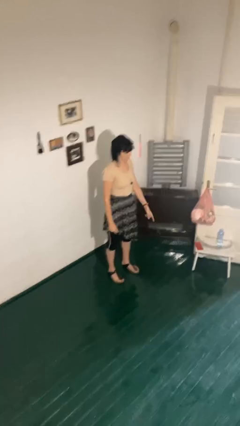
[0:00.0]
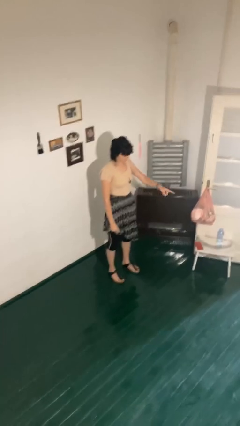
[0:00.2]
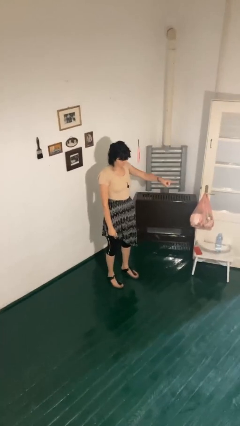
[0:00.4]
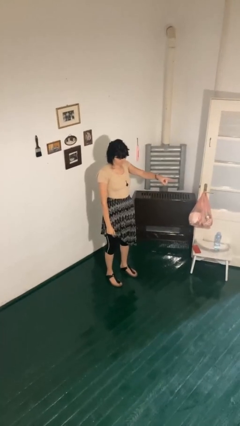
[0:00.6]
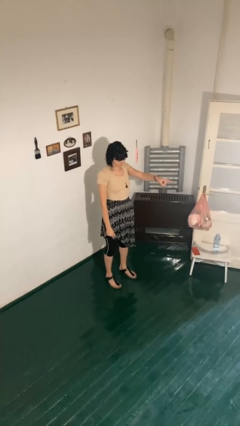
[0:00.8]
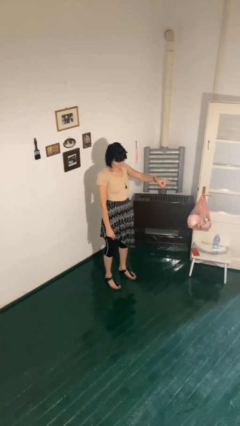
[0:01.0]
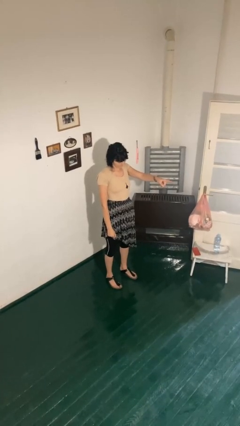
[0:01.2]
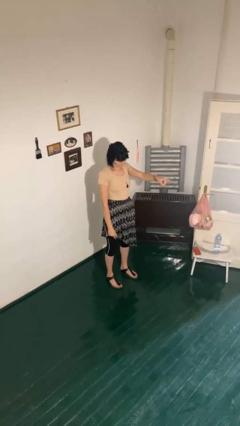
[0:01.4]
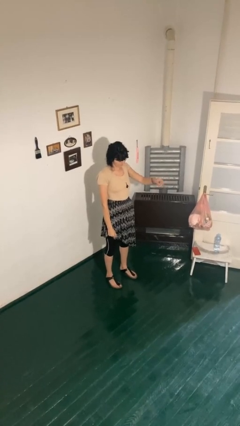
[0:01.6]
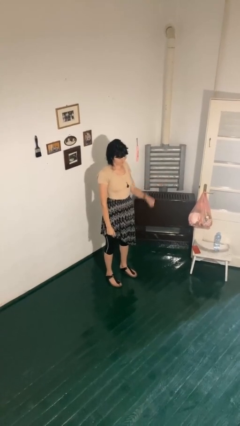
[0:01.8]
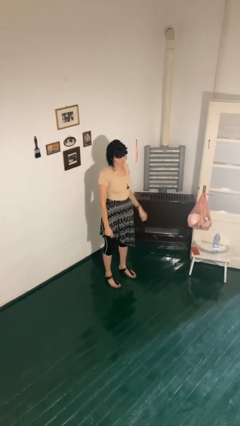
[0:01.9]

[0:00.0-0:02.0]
person points at person

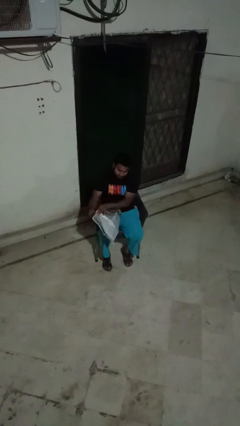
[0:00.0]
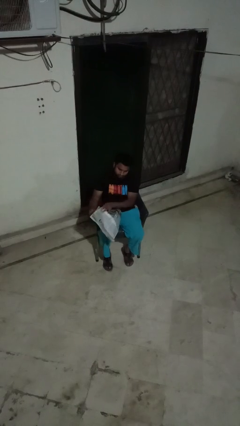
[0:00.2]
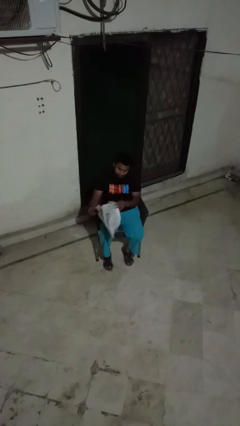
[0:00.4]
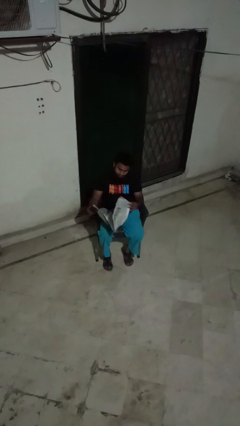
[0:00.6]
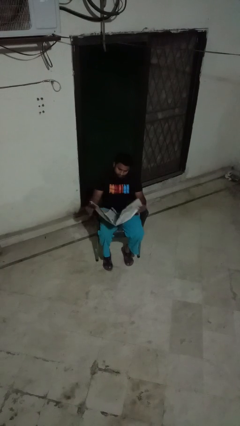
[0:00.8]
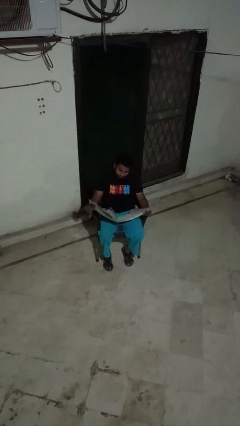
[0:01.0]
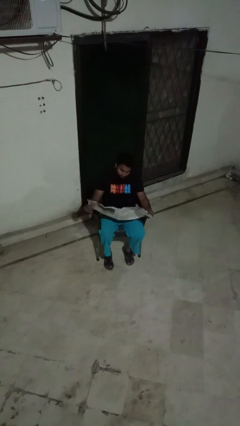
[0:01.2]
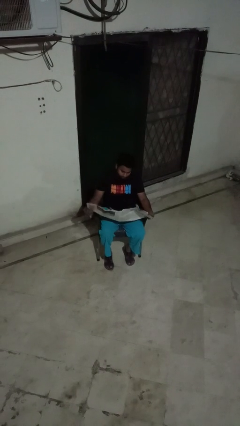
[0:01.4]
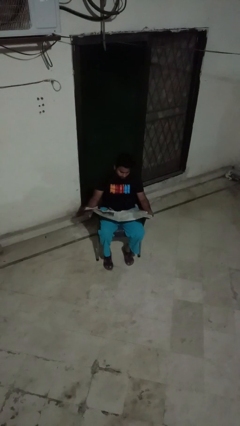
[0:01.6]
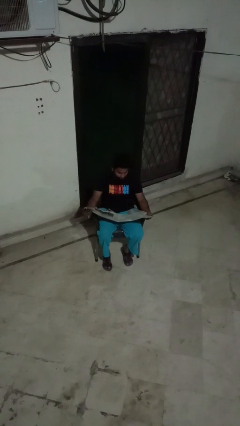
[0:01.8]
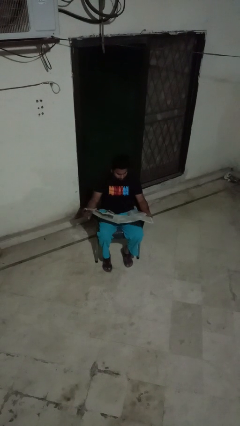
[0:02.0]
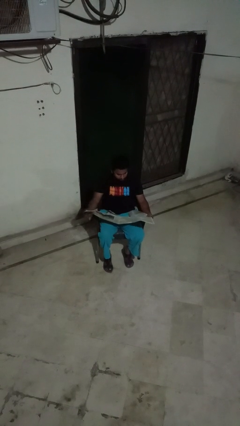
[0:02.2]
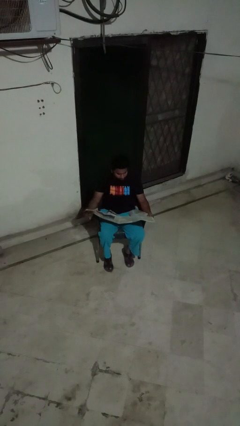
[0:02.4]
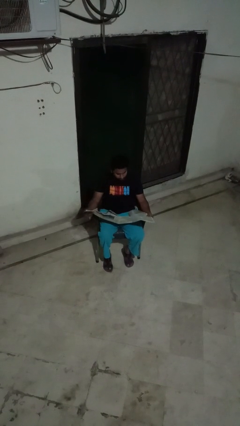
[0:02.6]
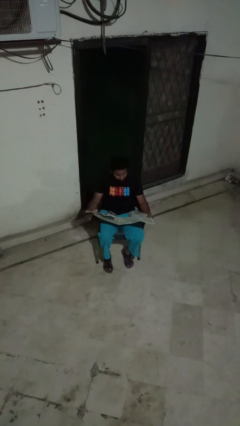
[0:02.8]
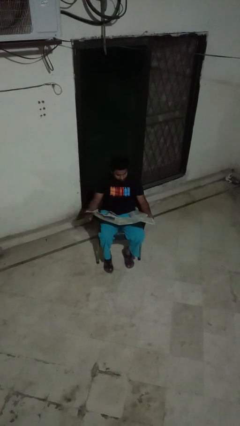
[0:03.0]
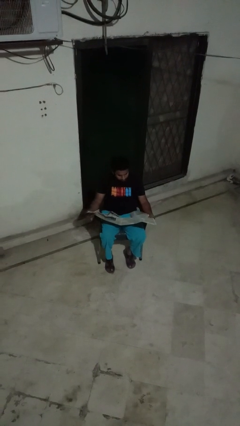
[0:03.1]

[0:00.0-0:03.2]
person reads newspaper

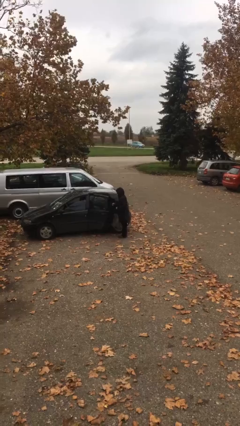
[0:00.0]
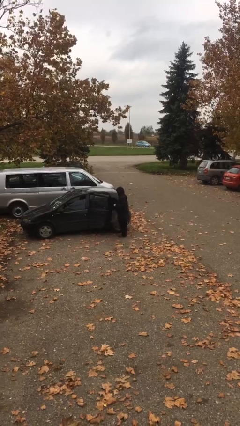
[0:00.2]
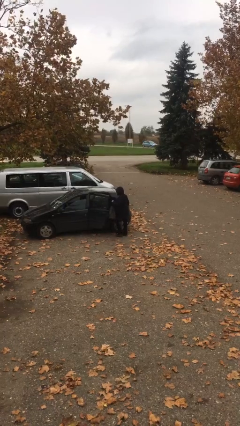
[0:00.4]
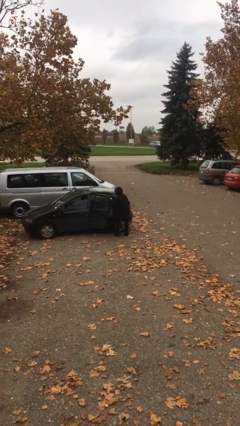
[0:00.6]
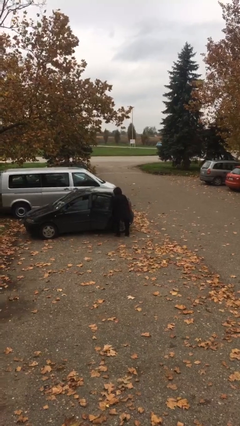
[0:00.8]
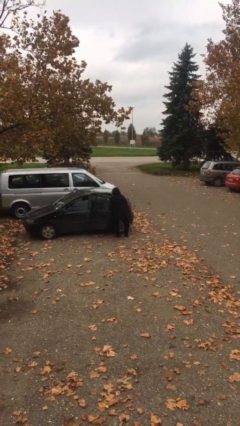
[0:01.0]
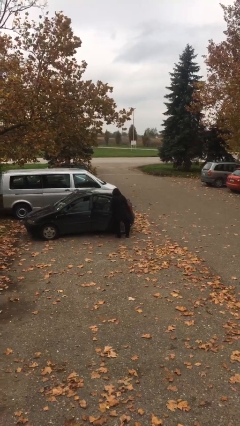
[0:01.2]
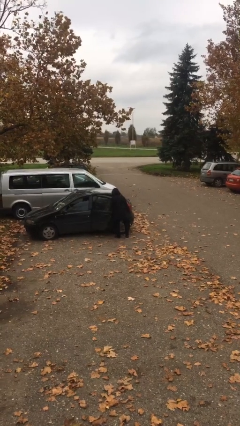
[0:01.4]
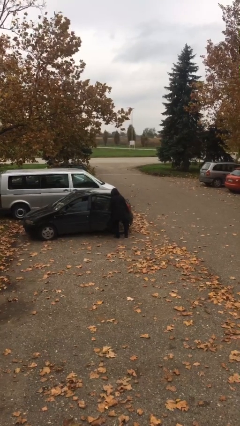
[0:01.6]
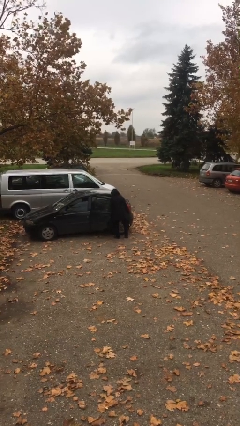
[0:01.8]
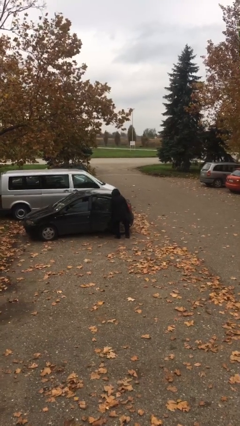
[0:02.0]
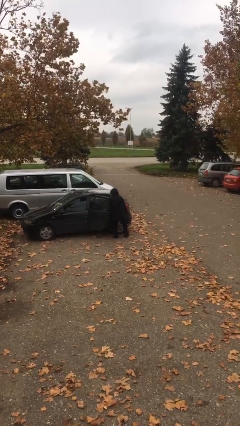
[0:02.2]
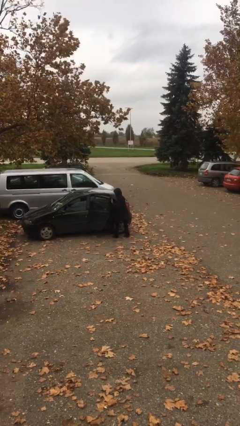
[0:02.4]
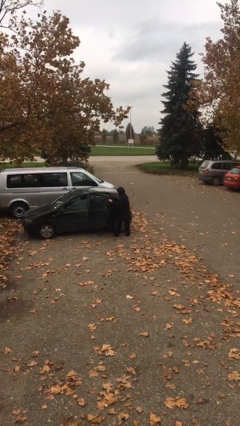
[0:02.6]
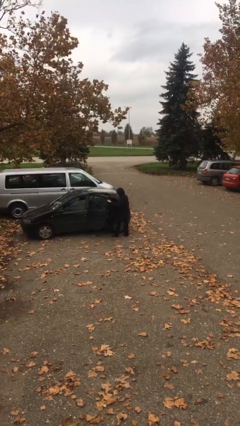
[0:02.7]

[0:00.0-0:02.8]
person loads car

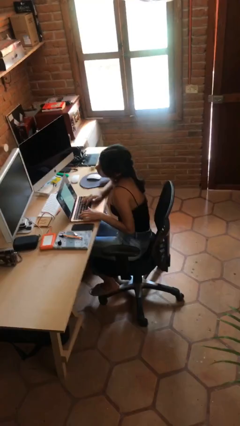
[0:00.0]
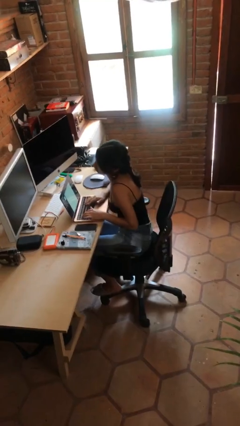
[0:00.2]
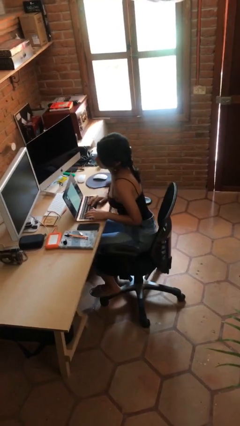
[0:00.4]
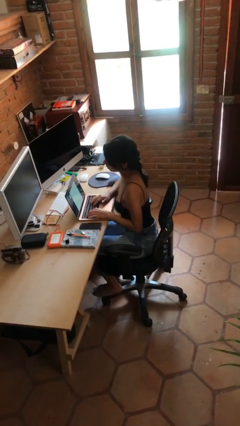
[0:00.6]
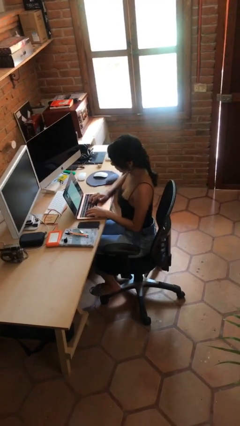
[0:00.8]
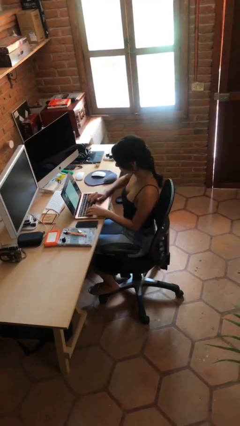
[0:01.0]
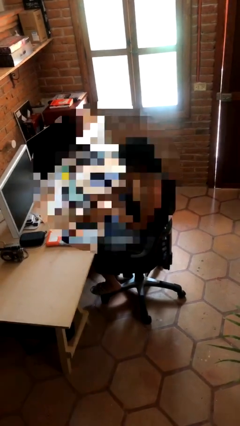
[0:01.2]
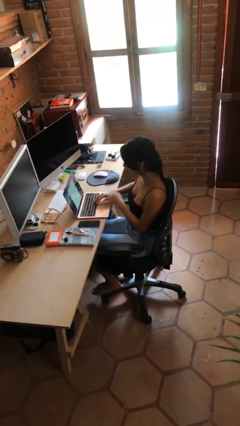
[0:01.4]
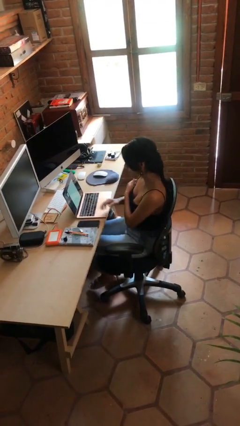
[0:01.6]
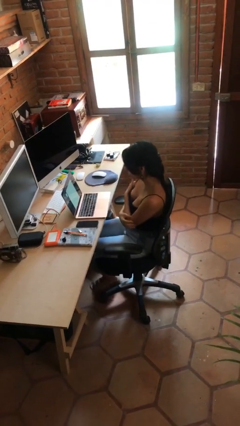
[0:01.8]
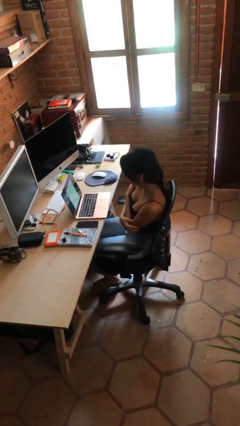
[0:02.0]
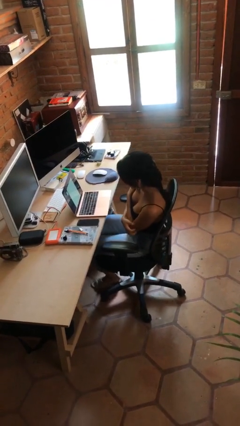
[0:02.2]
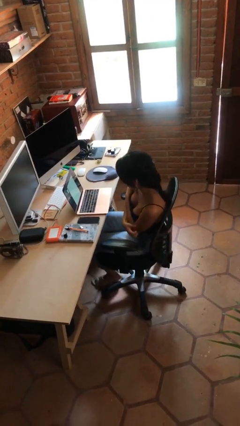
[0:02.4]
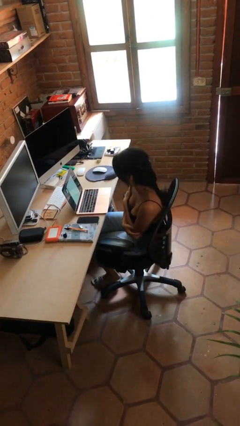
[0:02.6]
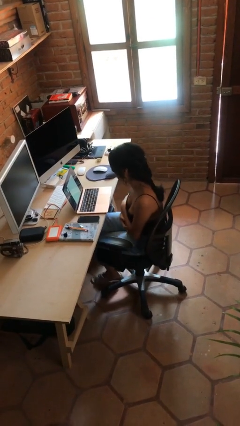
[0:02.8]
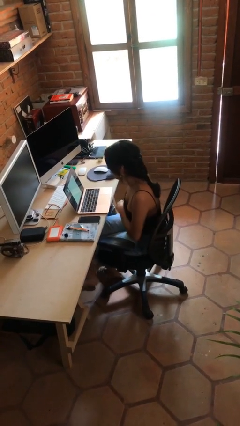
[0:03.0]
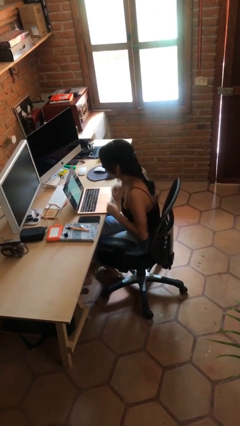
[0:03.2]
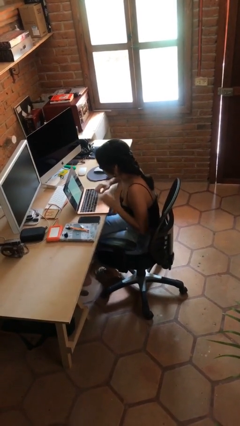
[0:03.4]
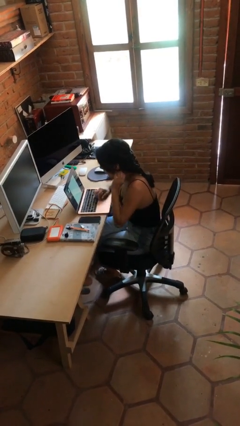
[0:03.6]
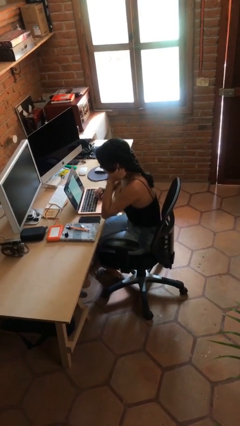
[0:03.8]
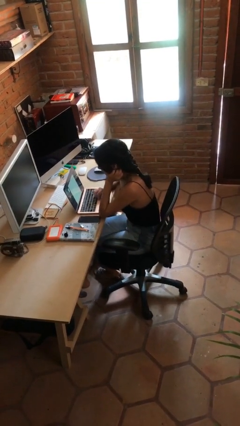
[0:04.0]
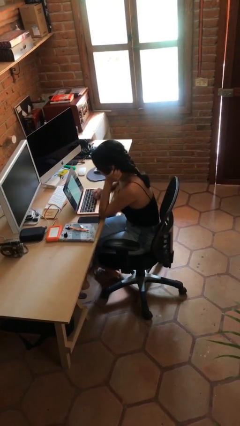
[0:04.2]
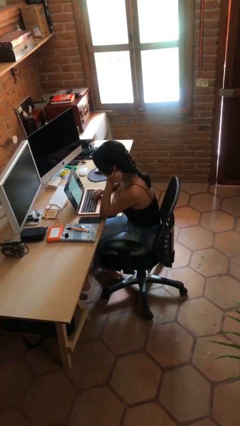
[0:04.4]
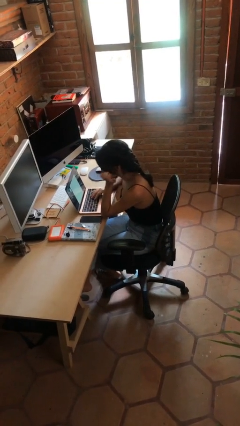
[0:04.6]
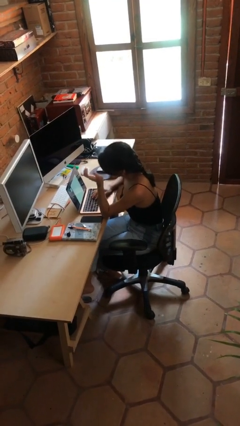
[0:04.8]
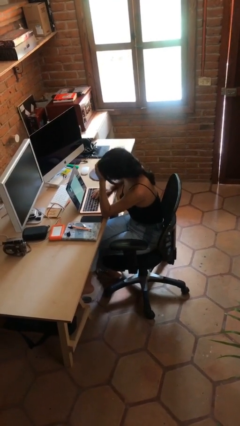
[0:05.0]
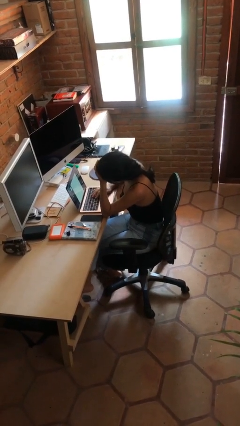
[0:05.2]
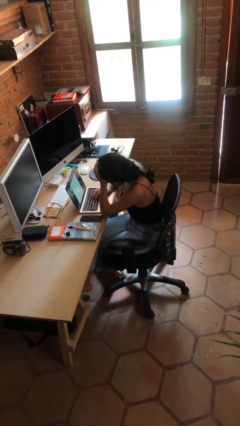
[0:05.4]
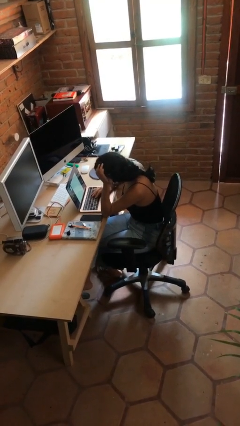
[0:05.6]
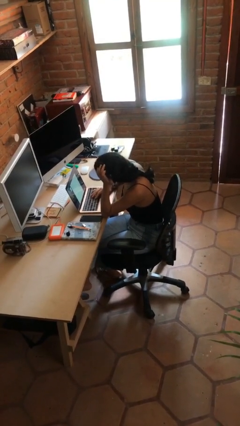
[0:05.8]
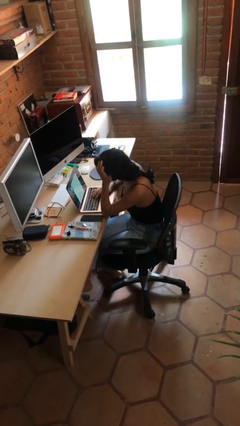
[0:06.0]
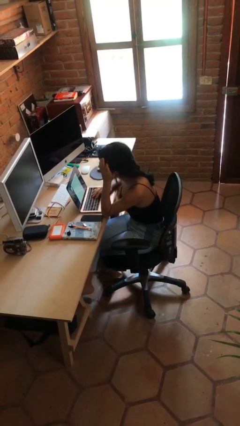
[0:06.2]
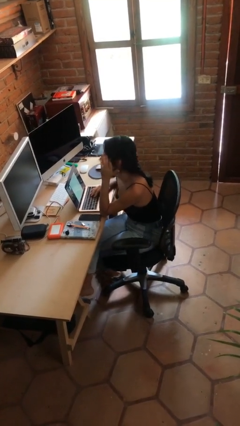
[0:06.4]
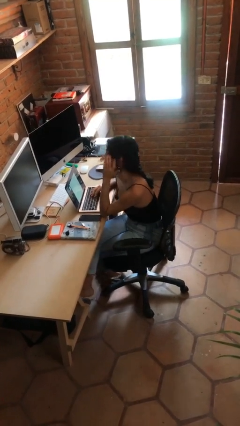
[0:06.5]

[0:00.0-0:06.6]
person interacts with laptop

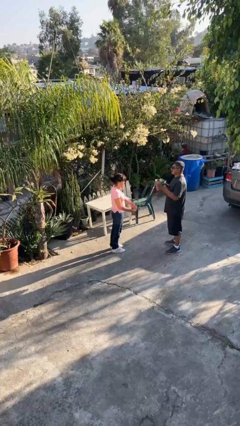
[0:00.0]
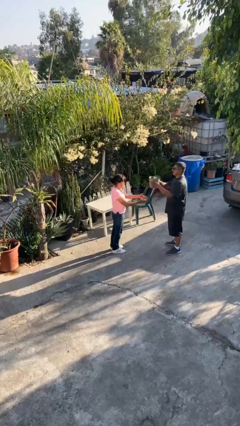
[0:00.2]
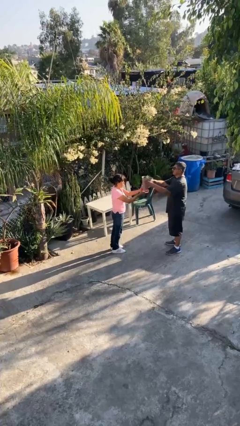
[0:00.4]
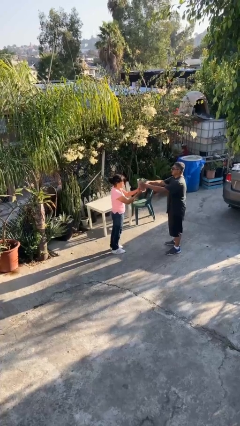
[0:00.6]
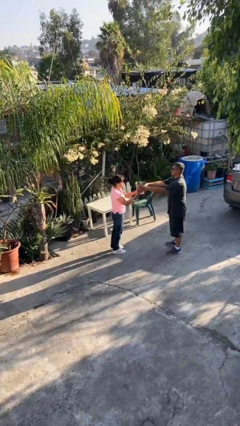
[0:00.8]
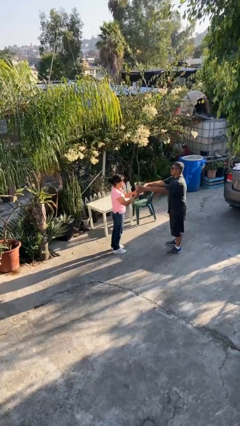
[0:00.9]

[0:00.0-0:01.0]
person transfers object to person

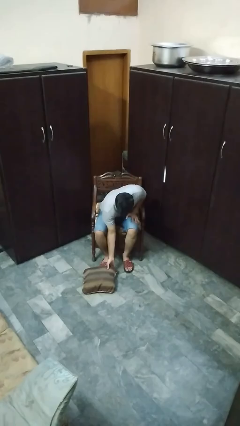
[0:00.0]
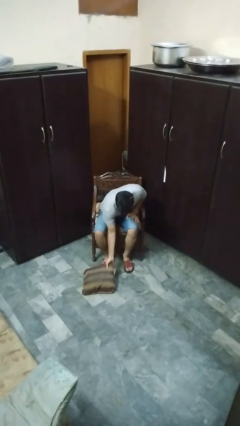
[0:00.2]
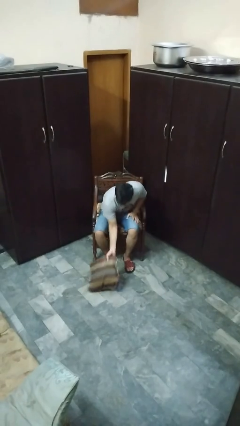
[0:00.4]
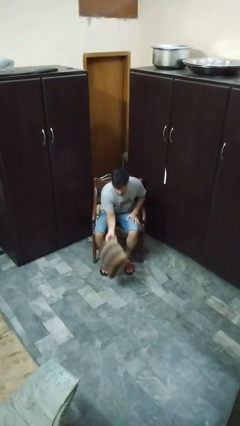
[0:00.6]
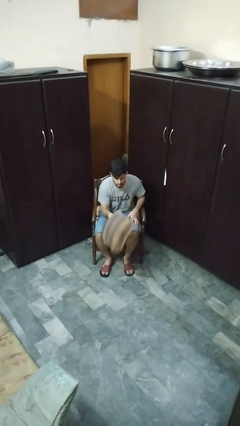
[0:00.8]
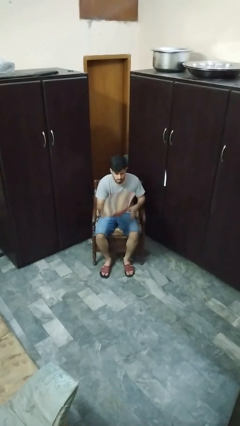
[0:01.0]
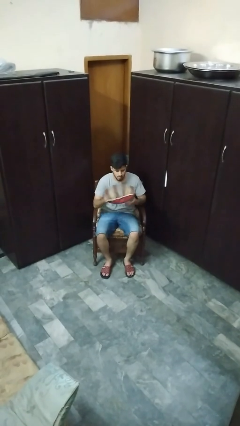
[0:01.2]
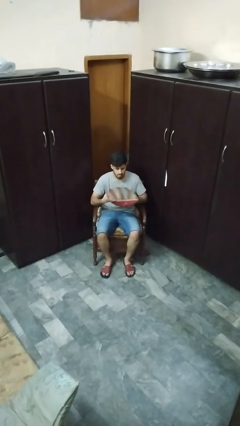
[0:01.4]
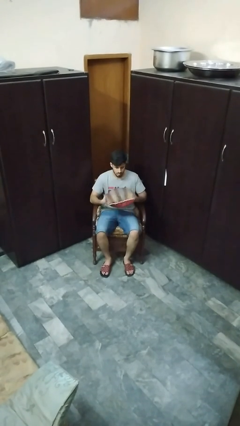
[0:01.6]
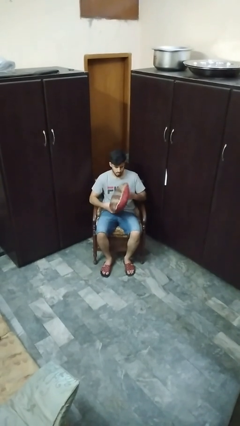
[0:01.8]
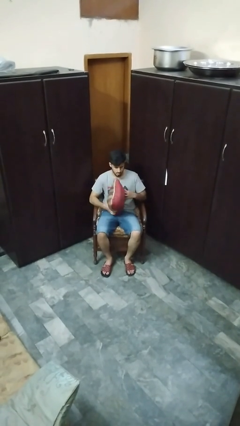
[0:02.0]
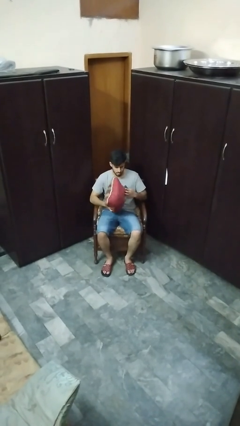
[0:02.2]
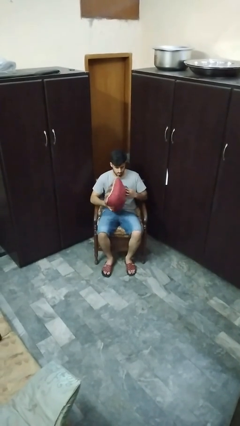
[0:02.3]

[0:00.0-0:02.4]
person picks up object from floor
